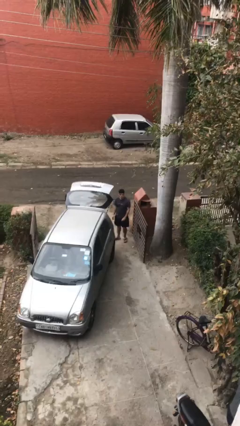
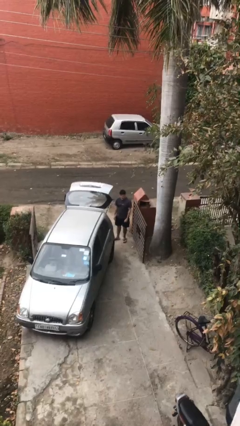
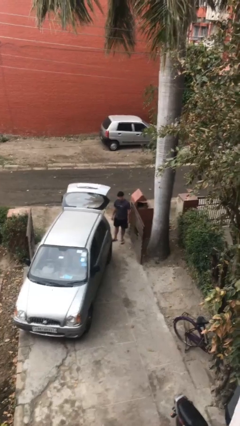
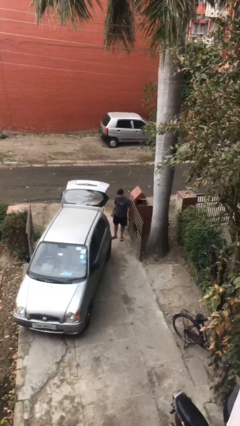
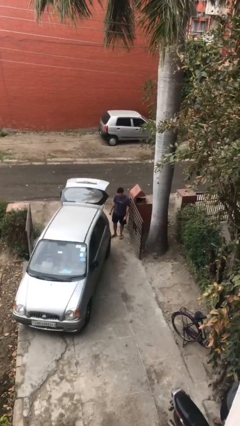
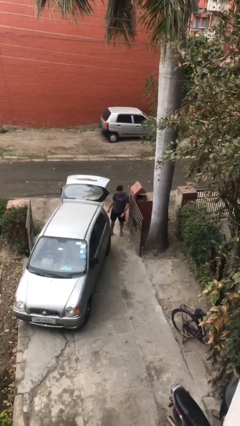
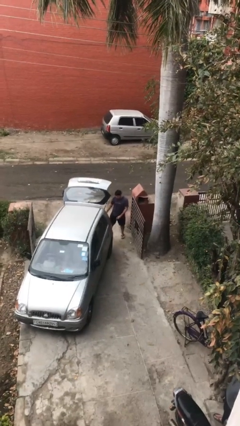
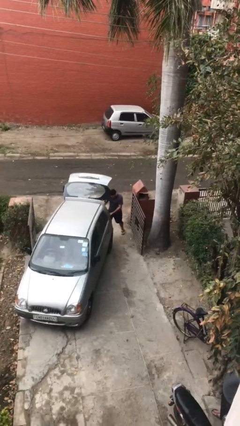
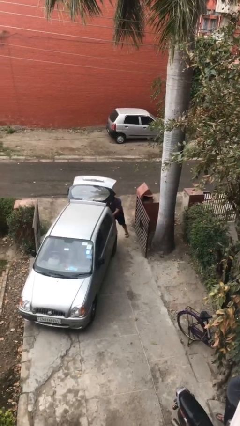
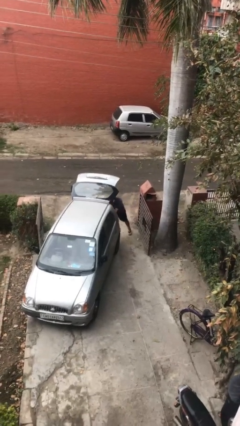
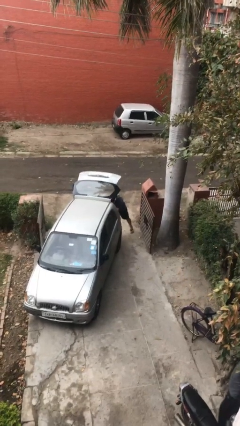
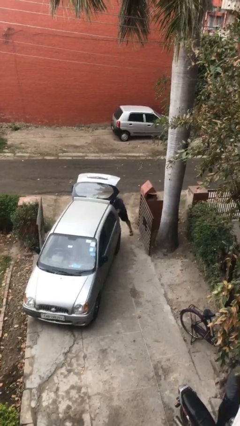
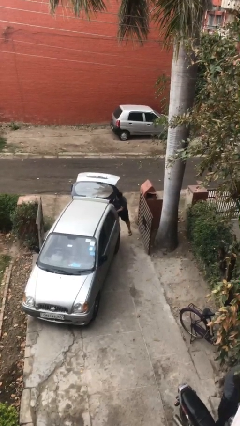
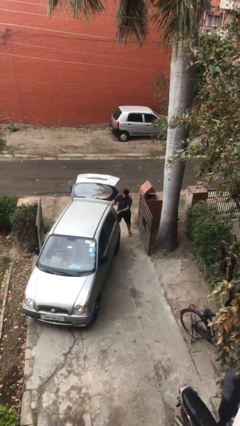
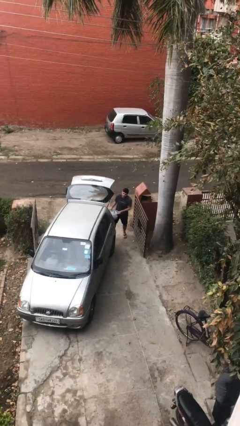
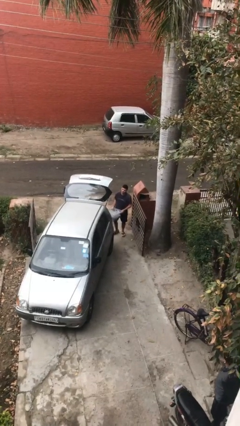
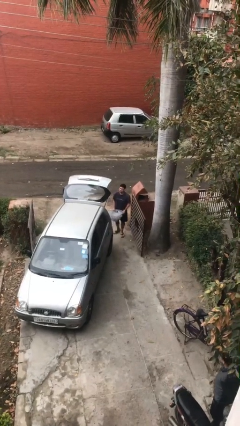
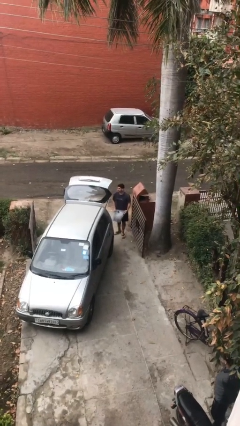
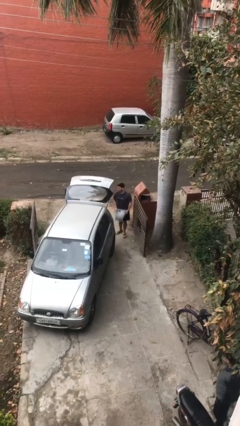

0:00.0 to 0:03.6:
person unloads car

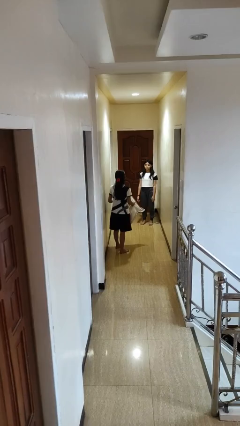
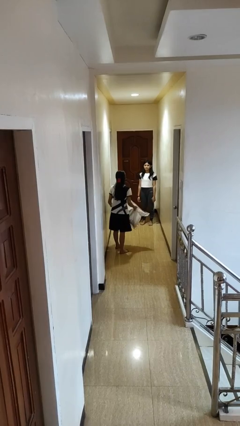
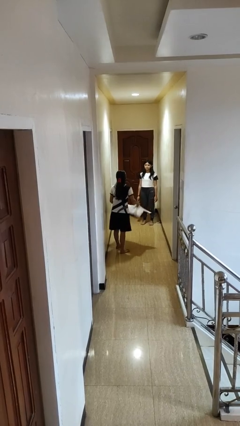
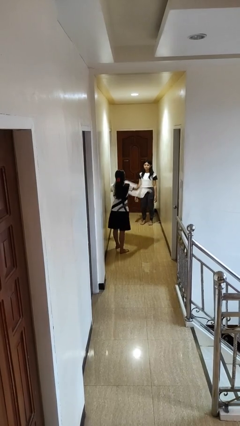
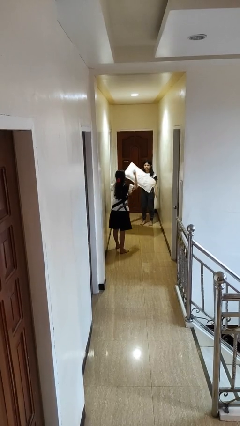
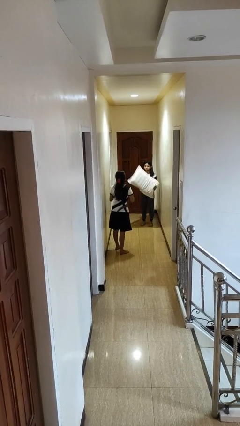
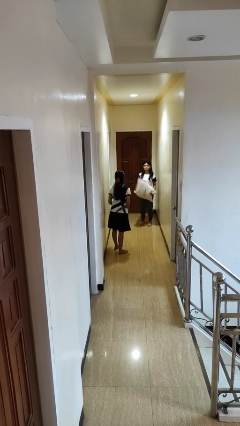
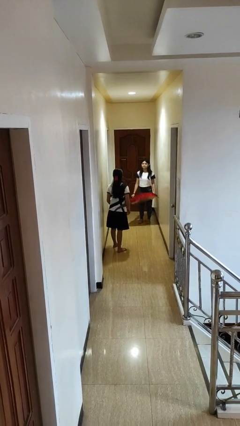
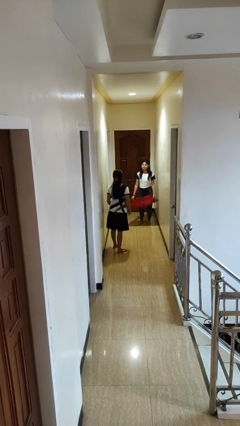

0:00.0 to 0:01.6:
person throws object to person

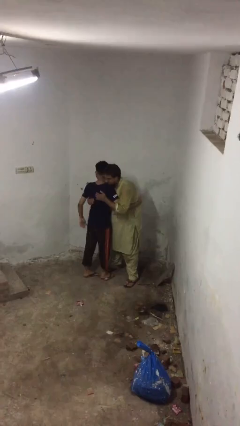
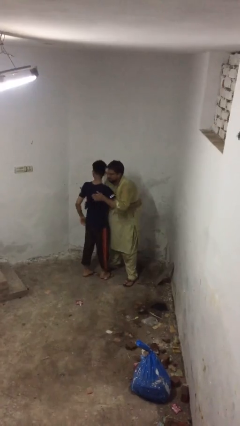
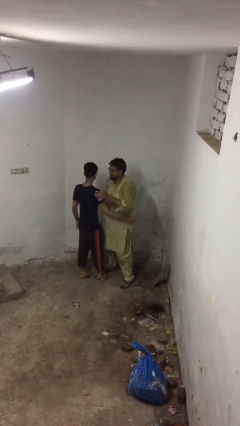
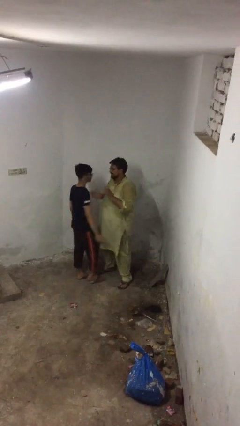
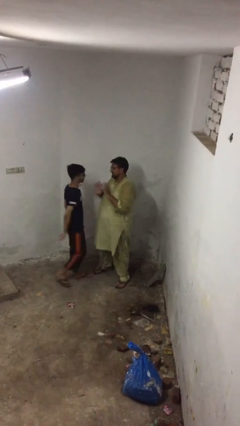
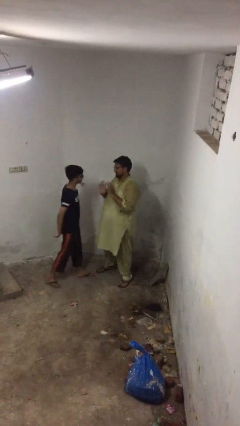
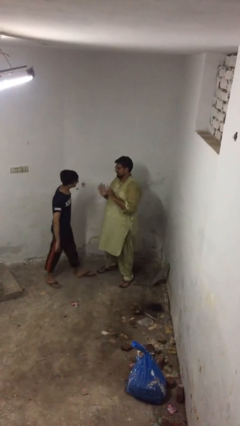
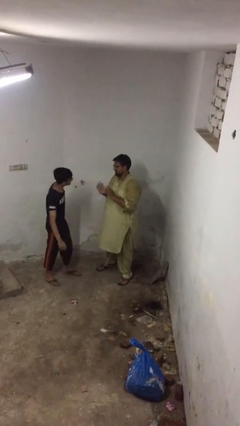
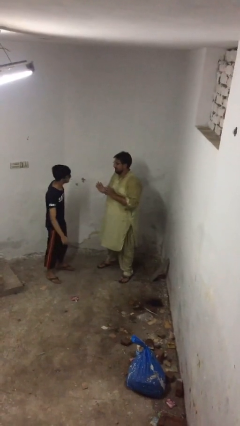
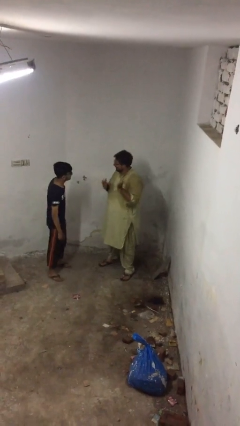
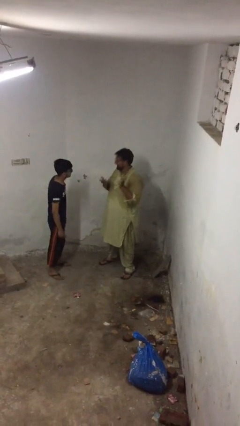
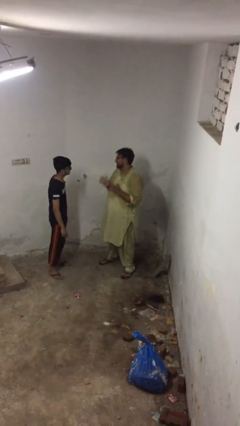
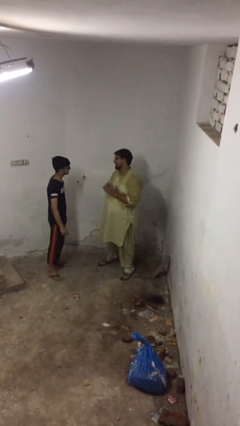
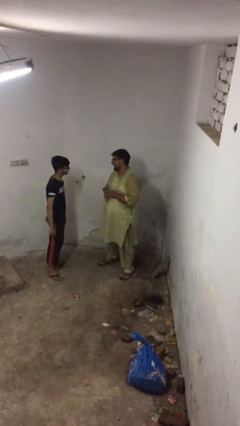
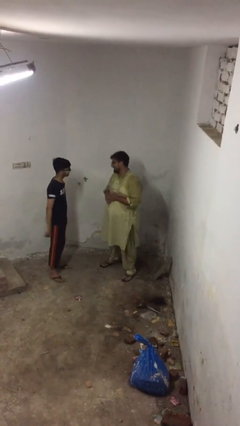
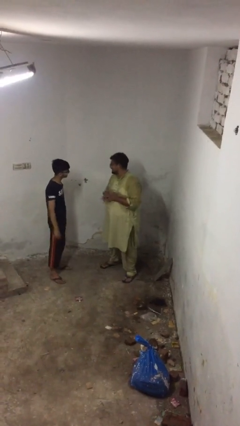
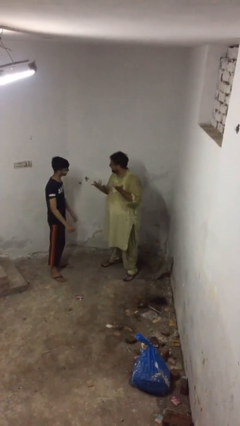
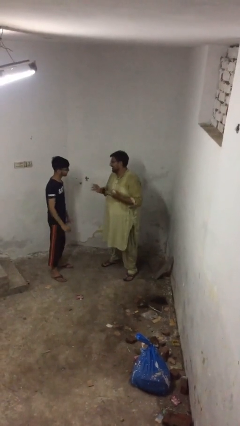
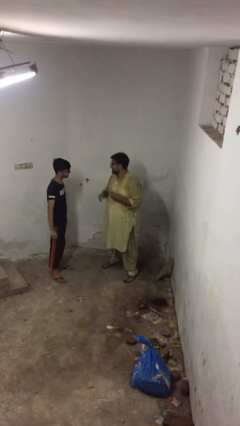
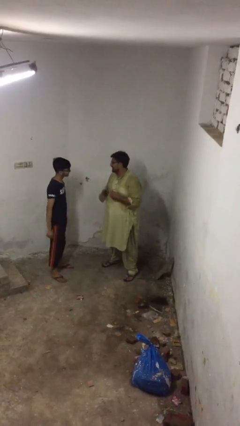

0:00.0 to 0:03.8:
person talks to person

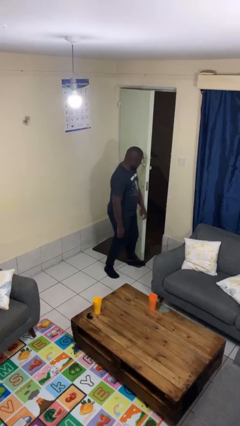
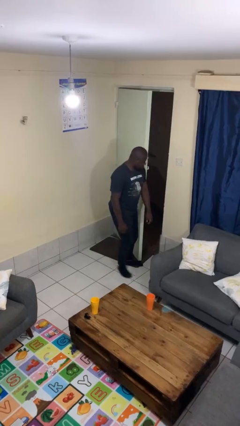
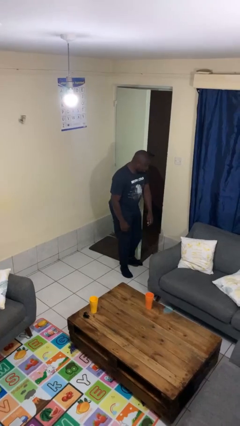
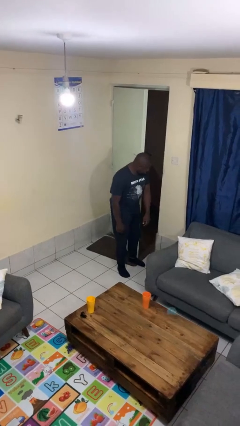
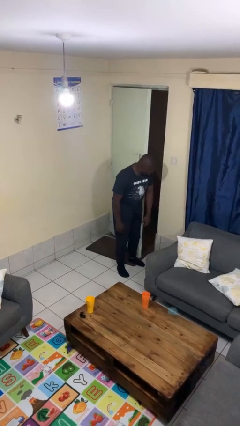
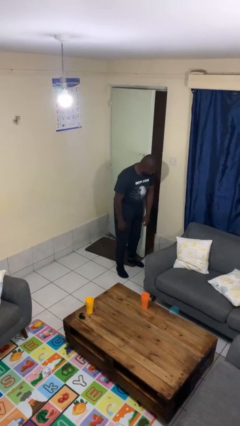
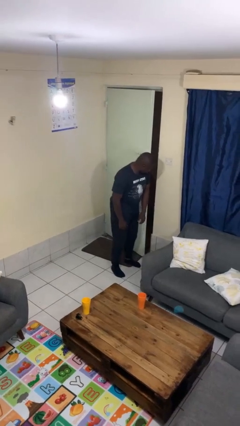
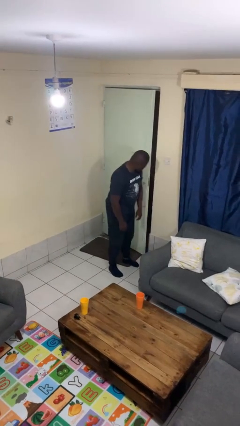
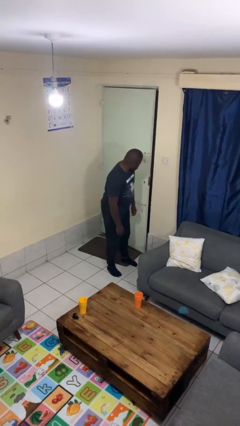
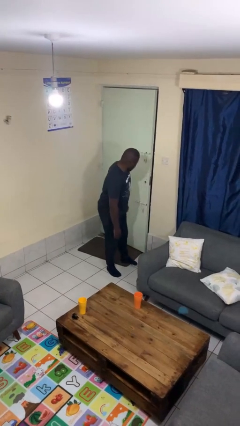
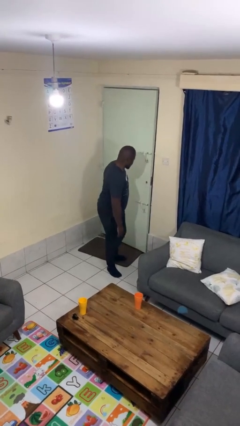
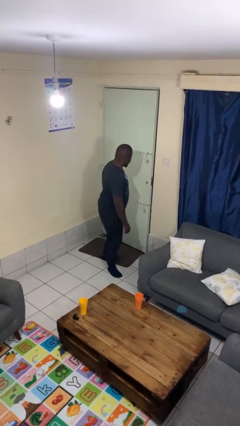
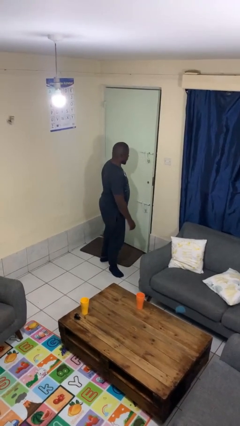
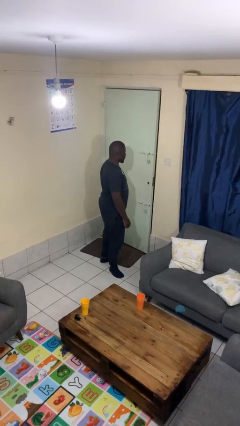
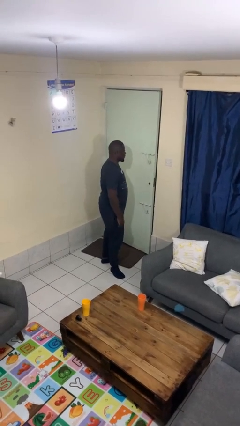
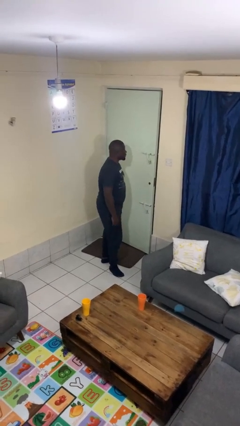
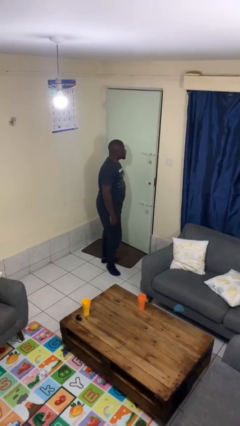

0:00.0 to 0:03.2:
person closes door with hip

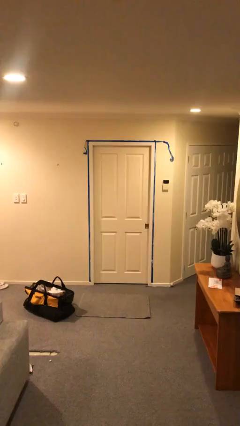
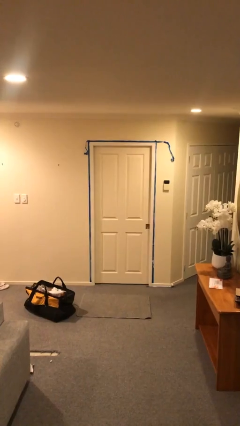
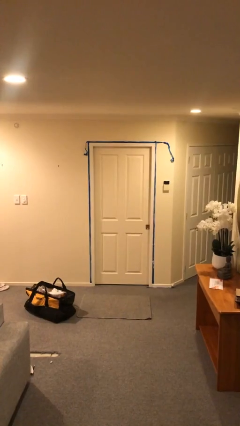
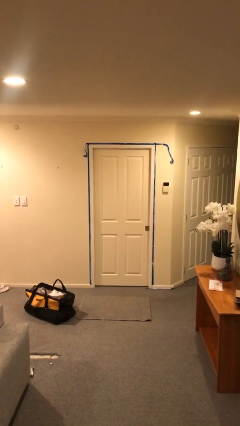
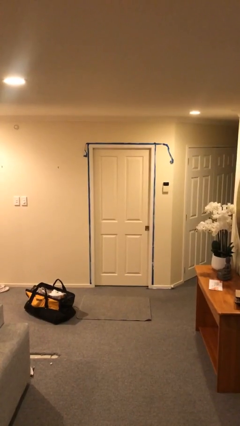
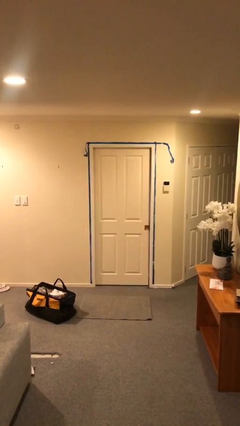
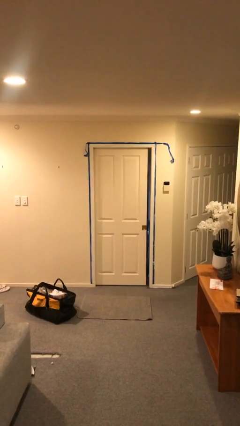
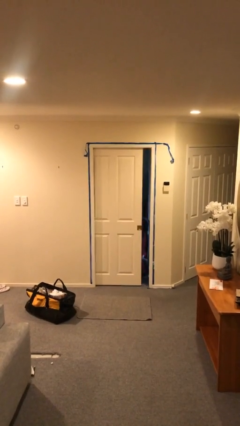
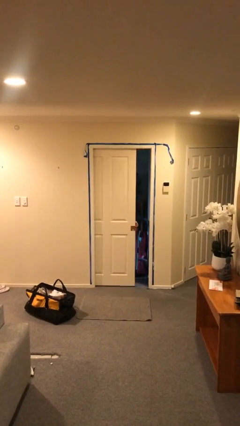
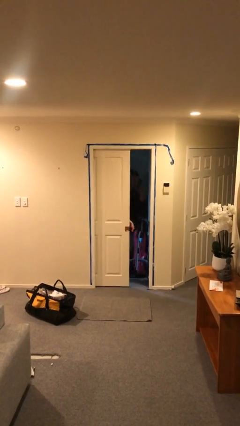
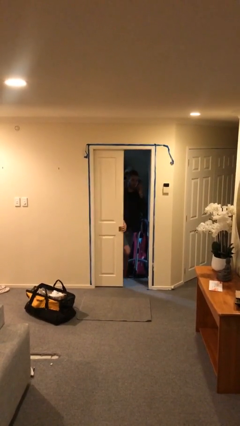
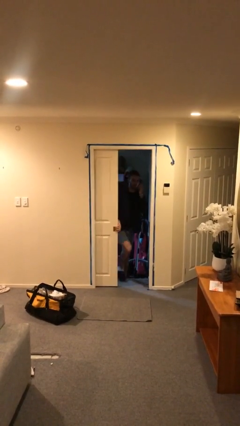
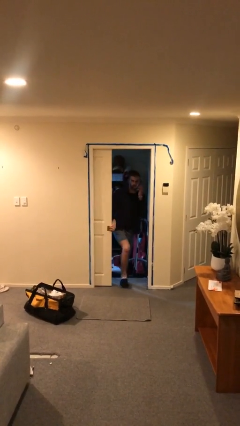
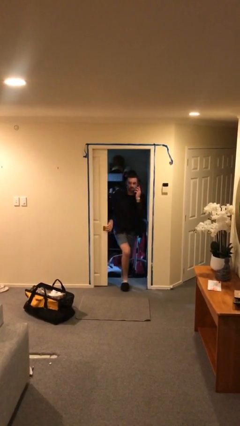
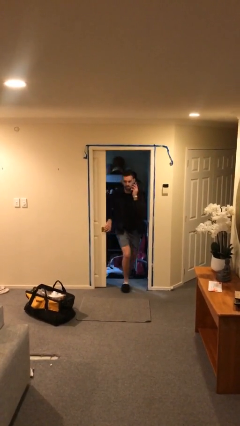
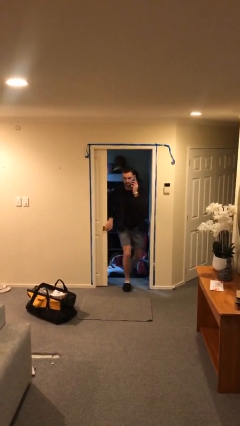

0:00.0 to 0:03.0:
person opens facility door

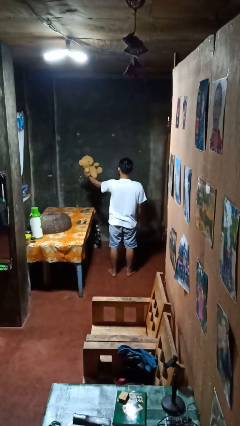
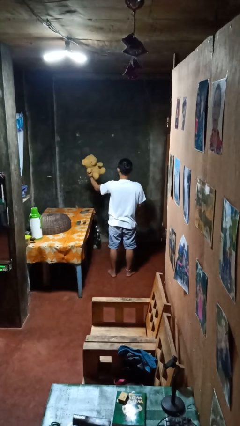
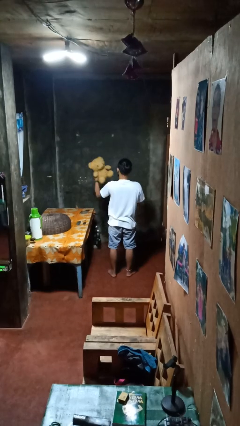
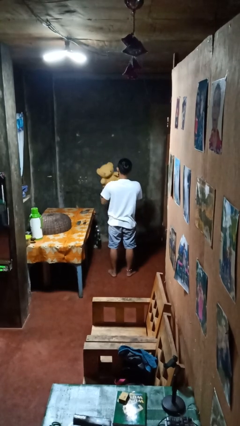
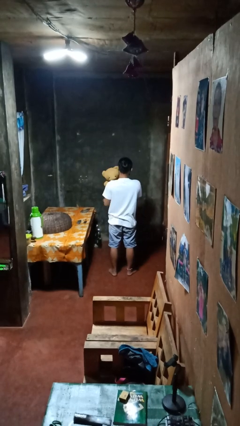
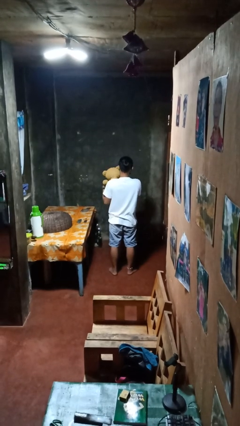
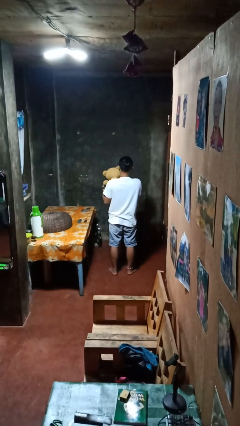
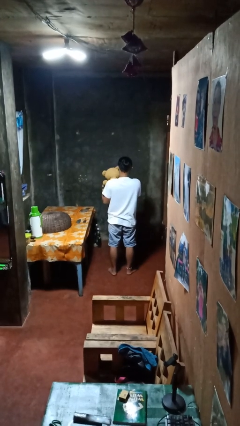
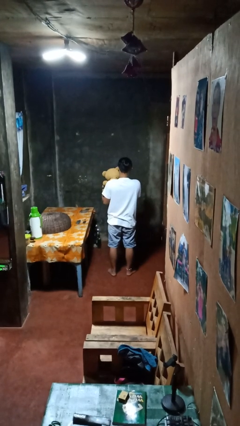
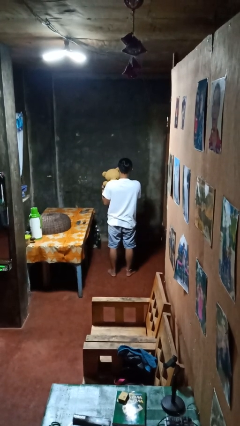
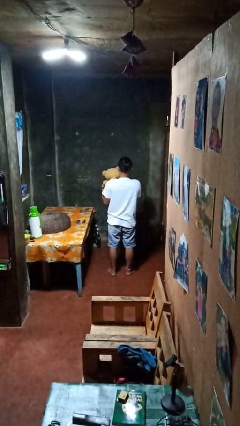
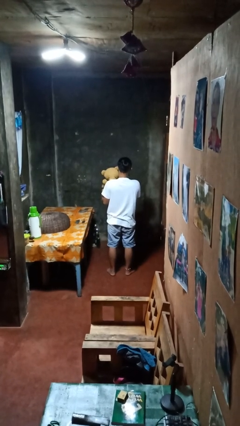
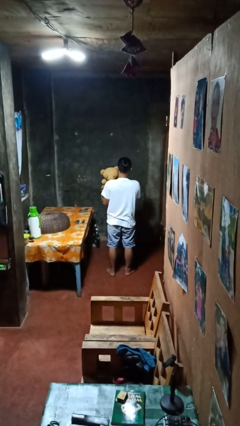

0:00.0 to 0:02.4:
person hugs stuffed animal
